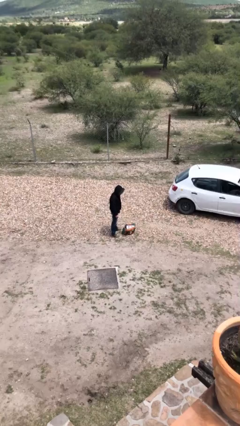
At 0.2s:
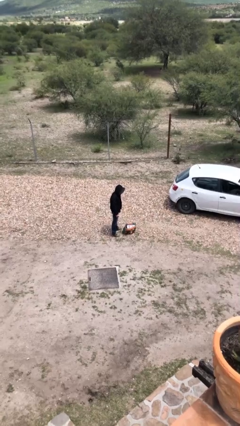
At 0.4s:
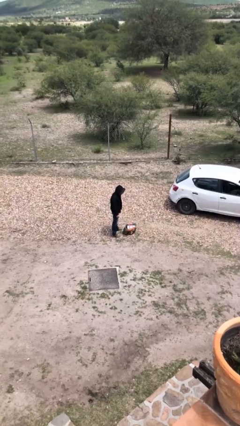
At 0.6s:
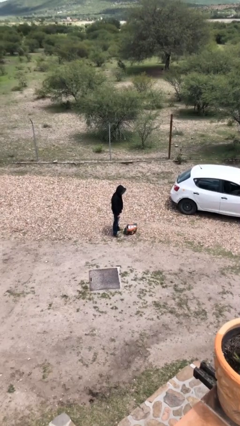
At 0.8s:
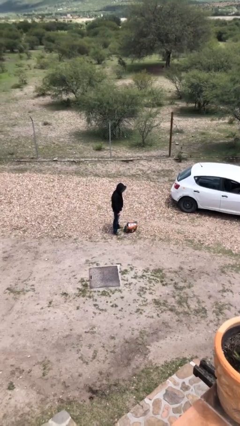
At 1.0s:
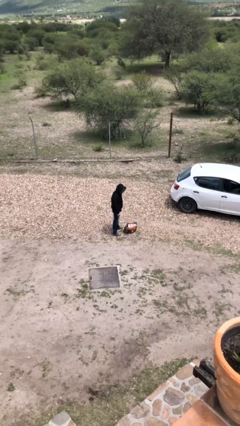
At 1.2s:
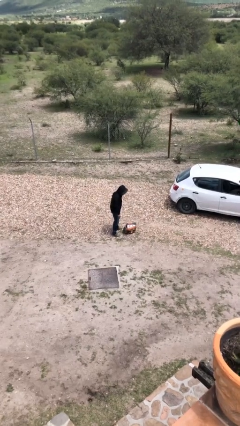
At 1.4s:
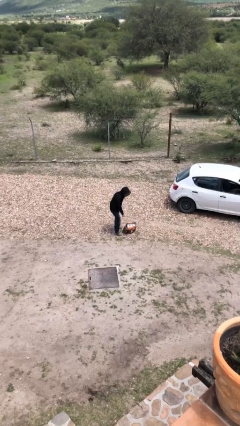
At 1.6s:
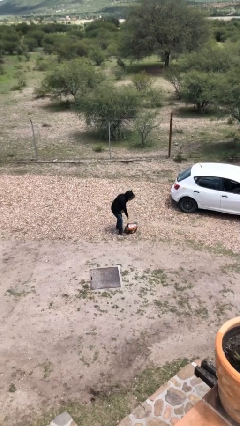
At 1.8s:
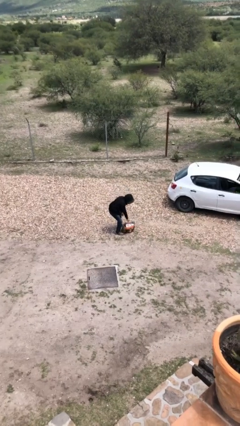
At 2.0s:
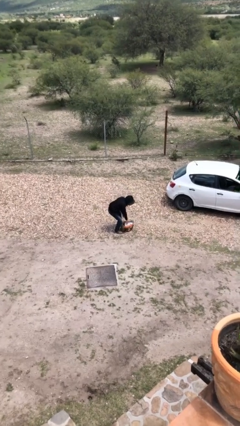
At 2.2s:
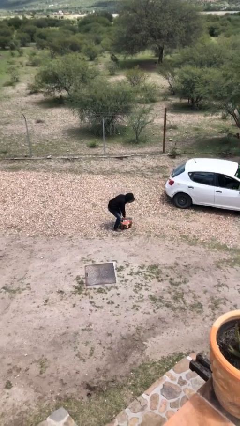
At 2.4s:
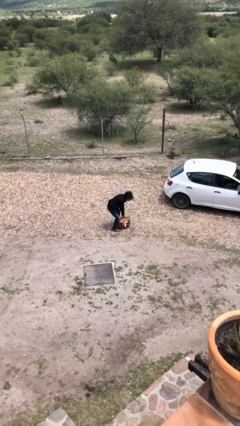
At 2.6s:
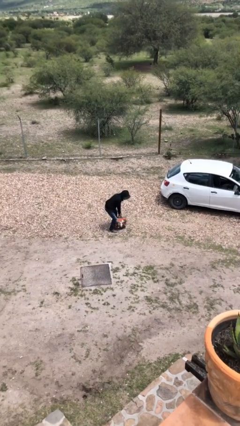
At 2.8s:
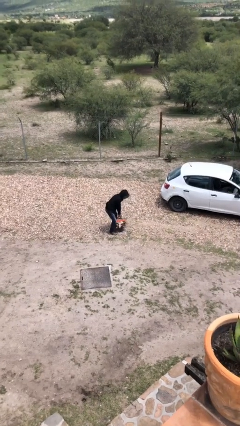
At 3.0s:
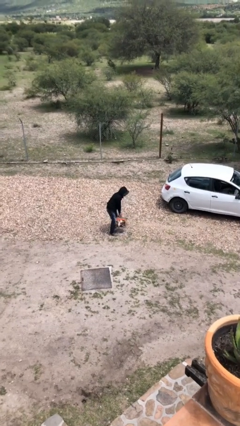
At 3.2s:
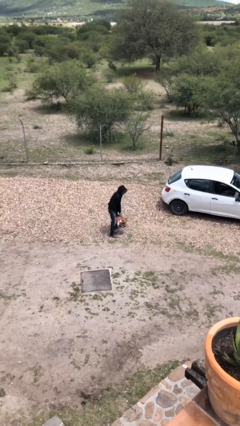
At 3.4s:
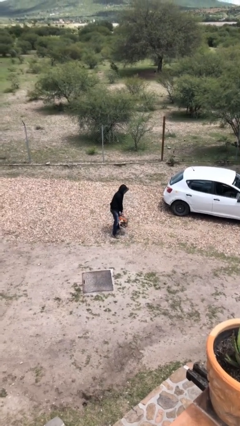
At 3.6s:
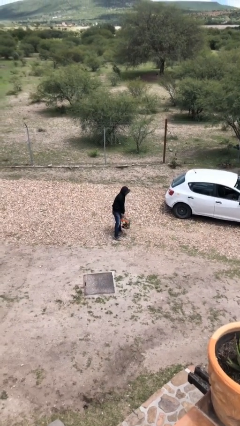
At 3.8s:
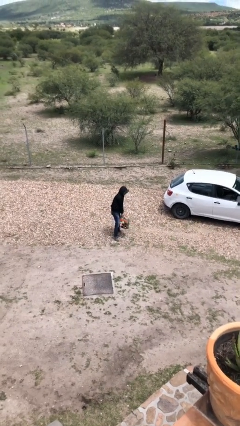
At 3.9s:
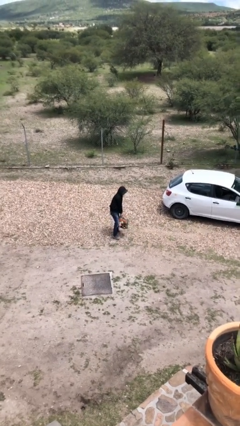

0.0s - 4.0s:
person picks up object from floor

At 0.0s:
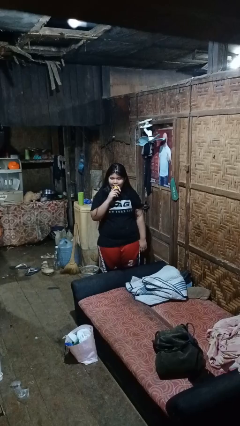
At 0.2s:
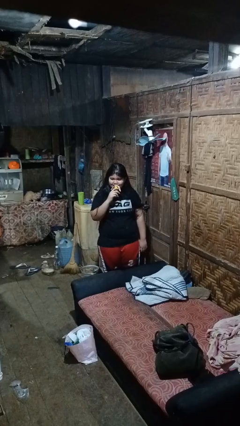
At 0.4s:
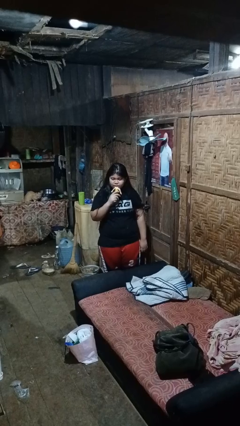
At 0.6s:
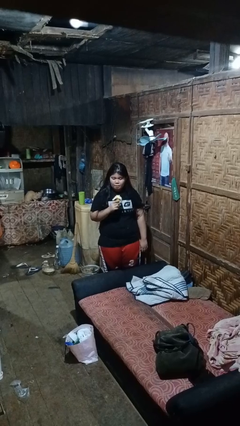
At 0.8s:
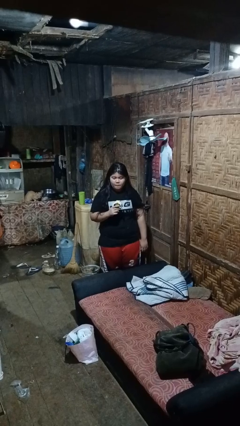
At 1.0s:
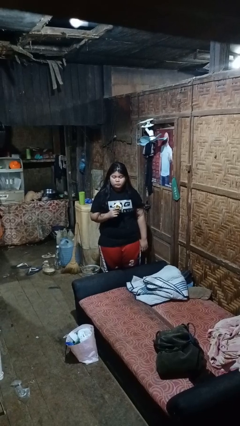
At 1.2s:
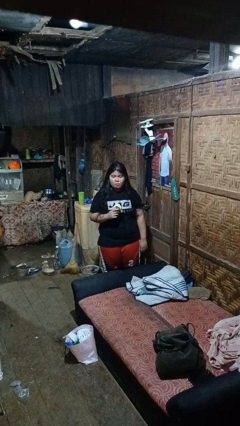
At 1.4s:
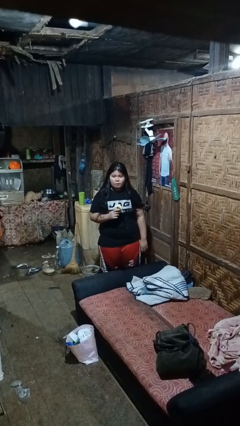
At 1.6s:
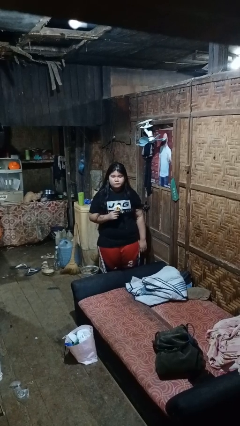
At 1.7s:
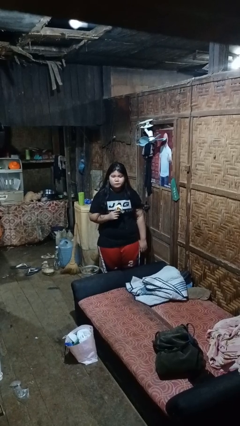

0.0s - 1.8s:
person eats banana

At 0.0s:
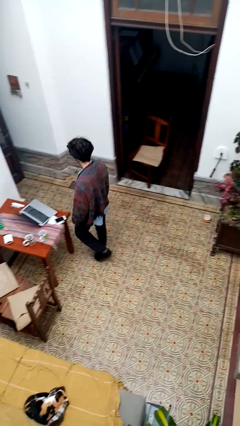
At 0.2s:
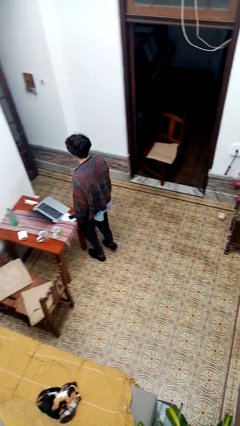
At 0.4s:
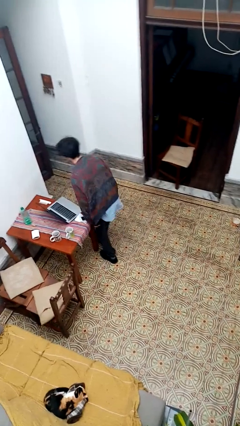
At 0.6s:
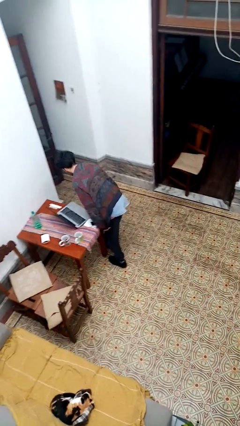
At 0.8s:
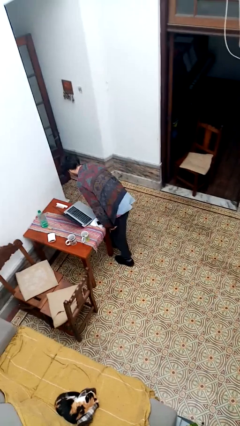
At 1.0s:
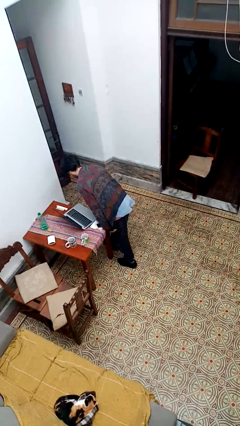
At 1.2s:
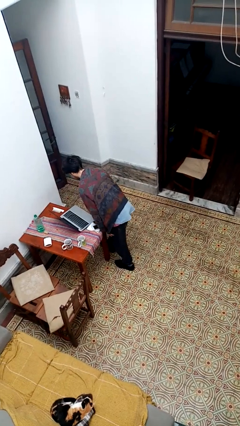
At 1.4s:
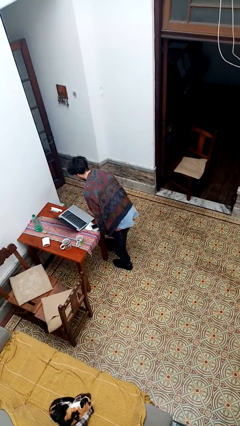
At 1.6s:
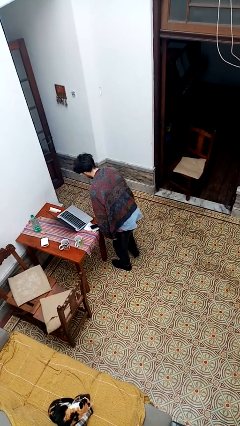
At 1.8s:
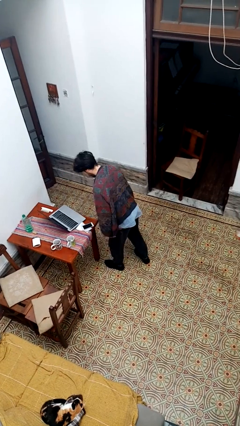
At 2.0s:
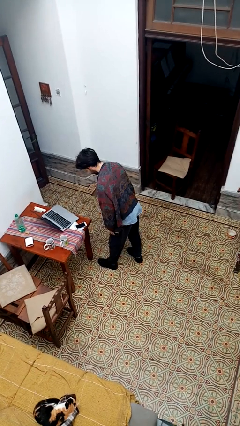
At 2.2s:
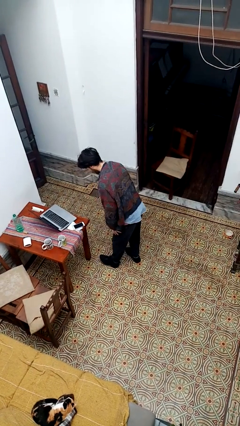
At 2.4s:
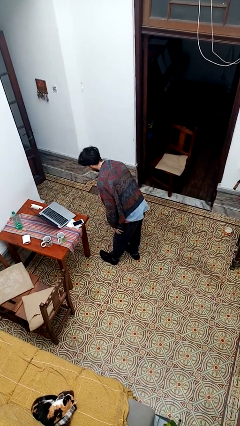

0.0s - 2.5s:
person bumps into table

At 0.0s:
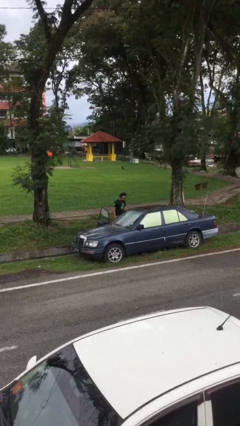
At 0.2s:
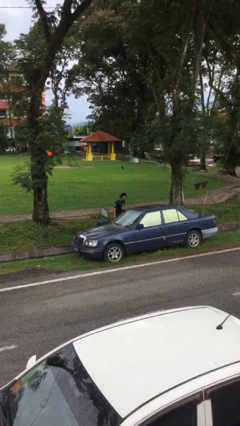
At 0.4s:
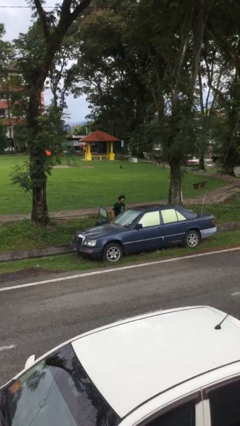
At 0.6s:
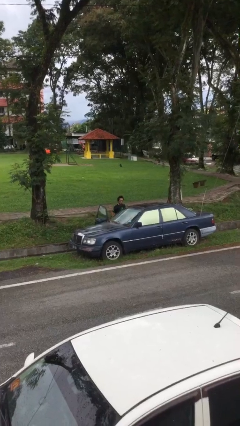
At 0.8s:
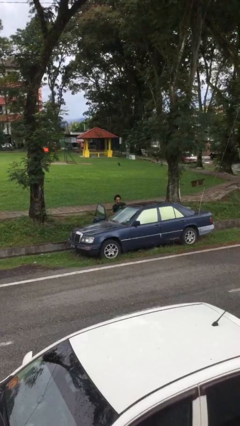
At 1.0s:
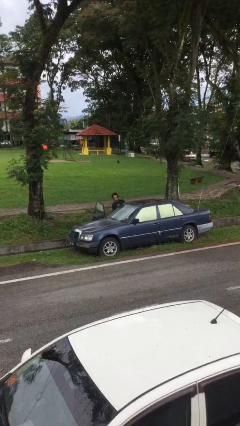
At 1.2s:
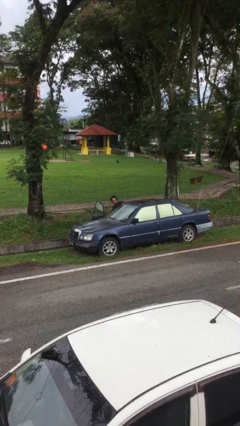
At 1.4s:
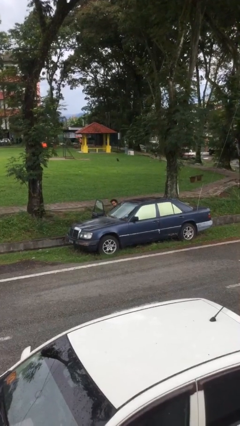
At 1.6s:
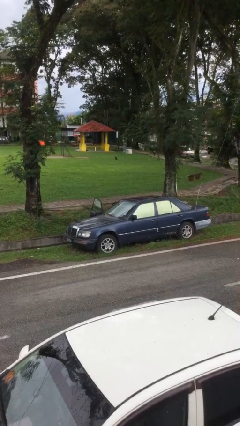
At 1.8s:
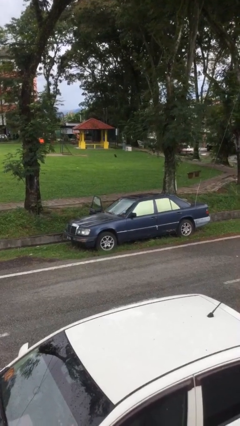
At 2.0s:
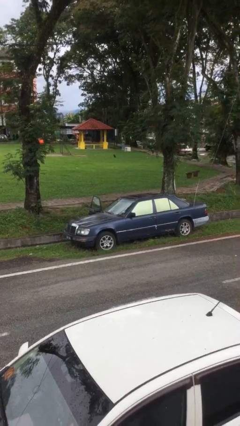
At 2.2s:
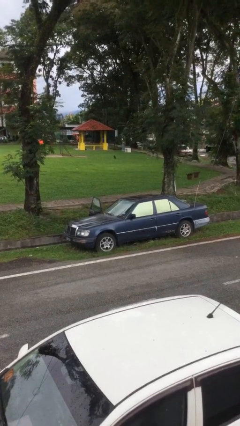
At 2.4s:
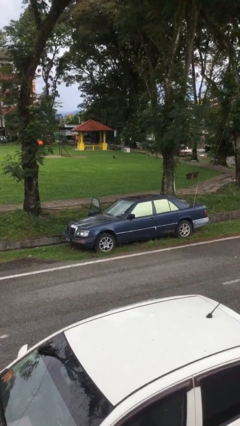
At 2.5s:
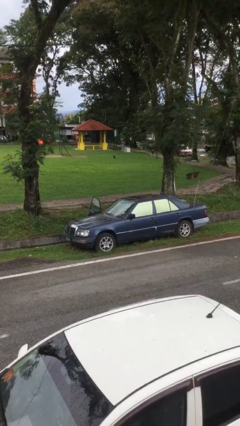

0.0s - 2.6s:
person enters car

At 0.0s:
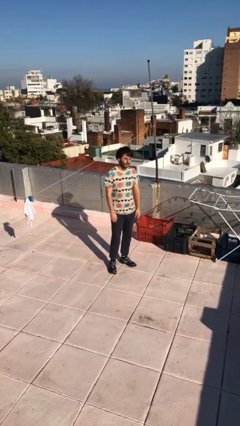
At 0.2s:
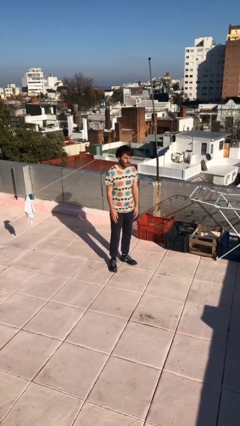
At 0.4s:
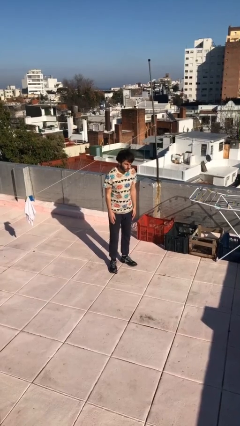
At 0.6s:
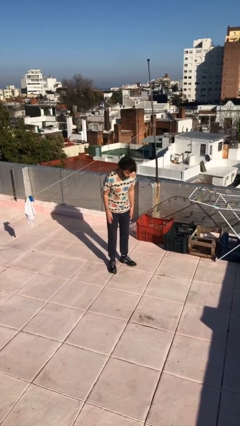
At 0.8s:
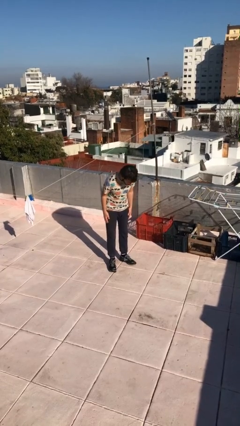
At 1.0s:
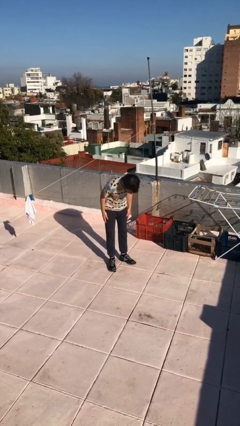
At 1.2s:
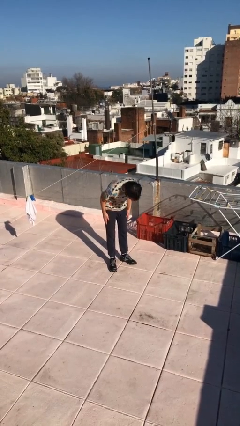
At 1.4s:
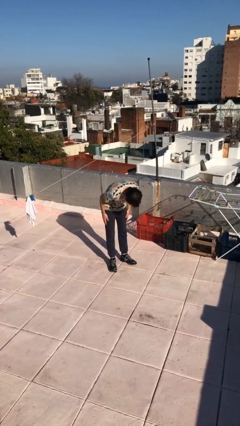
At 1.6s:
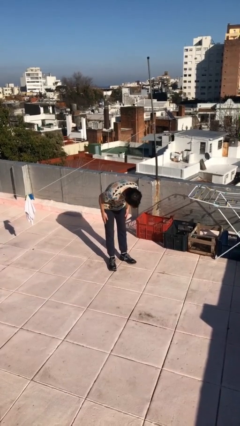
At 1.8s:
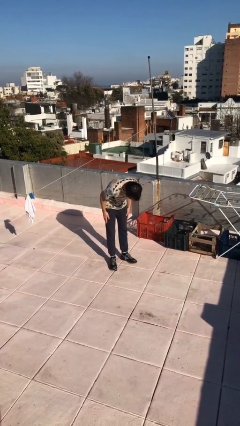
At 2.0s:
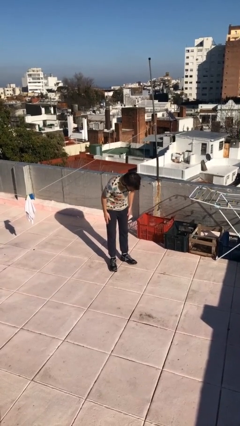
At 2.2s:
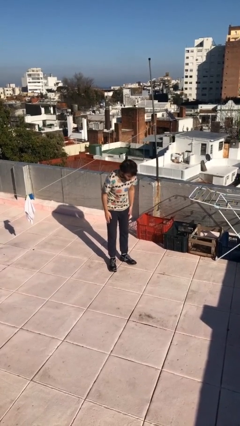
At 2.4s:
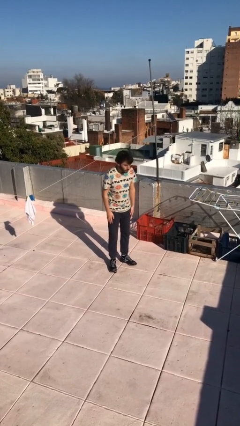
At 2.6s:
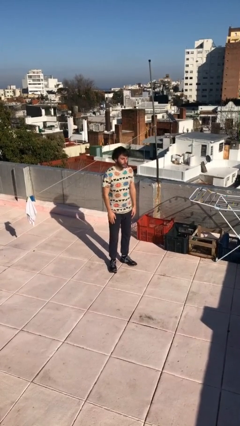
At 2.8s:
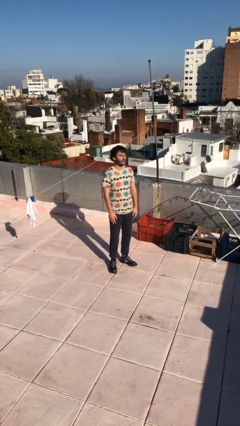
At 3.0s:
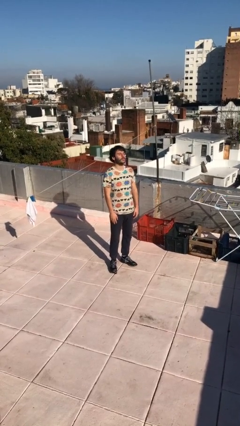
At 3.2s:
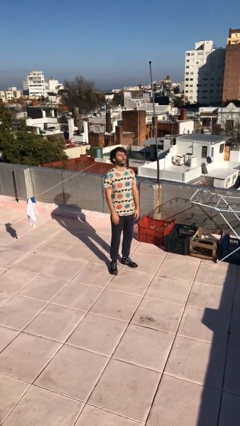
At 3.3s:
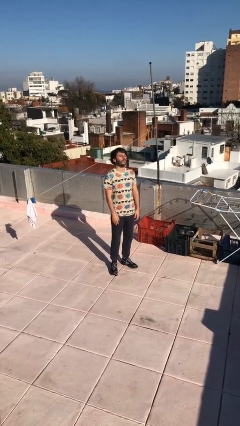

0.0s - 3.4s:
person bows

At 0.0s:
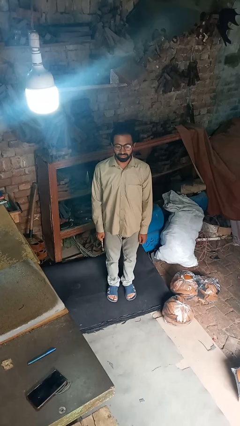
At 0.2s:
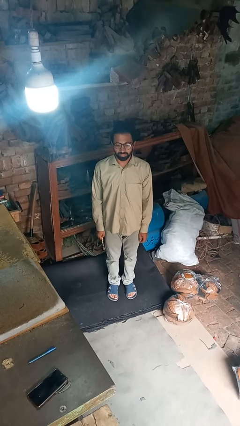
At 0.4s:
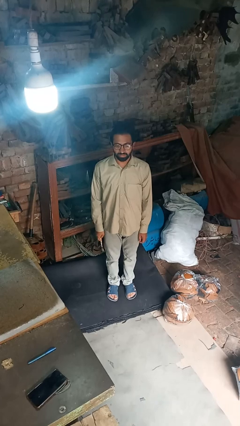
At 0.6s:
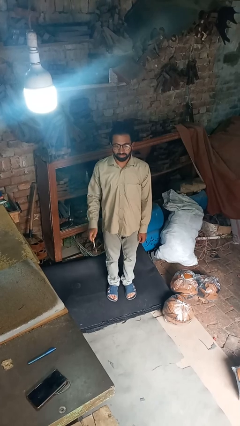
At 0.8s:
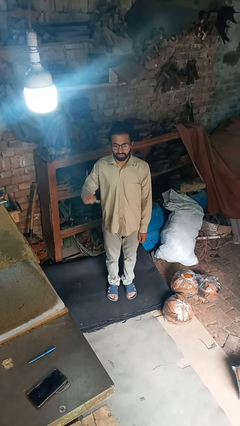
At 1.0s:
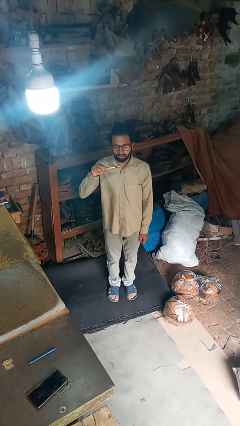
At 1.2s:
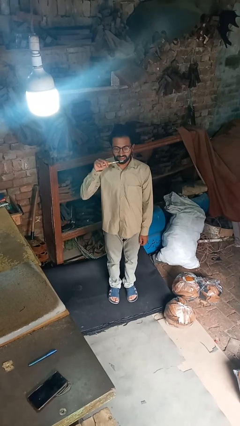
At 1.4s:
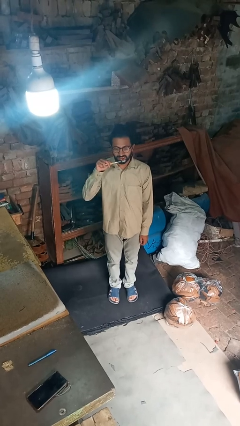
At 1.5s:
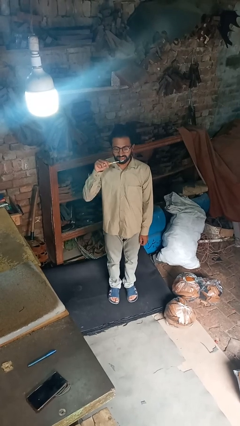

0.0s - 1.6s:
person brushes teeth

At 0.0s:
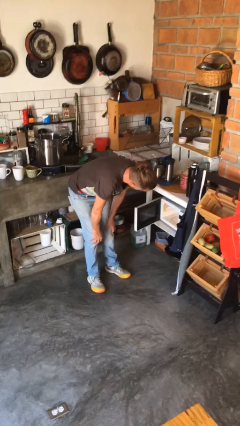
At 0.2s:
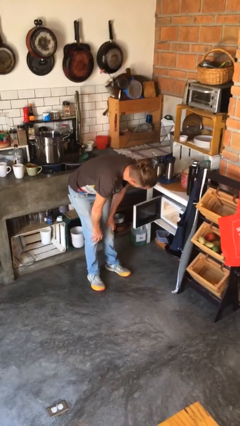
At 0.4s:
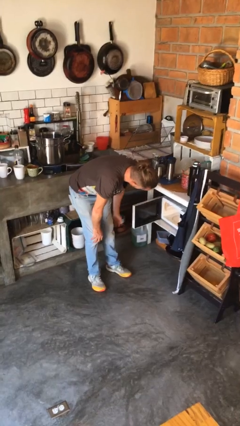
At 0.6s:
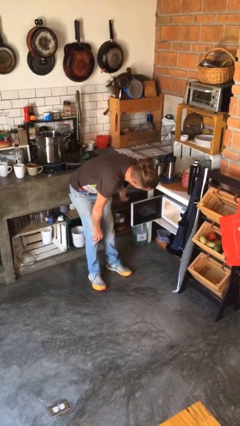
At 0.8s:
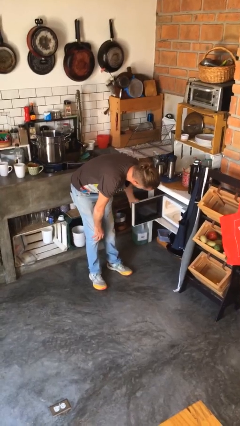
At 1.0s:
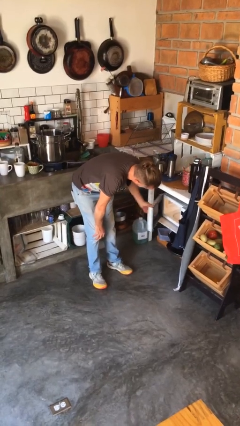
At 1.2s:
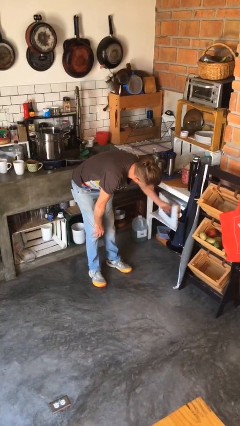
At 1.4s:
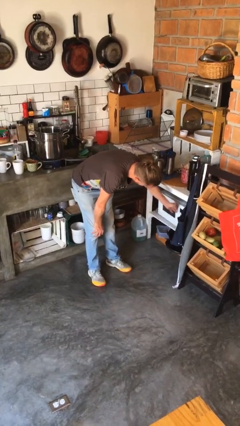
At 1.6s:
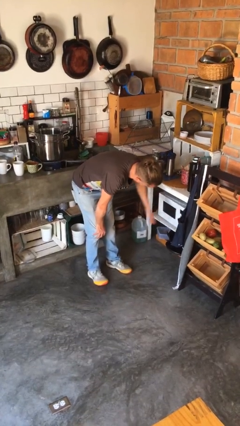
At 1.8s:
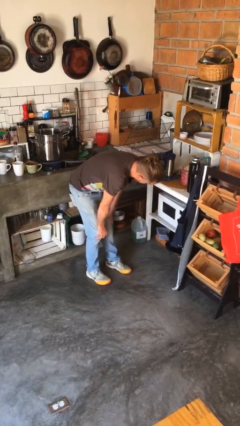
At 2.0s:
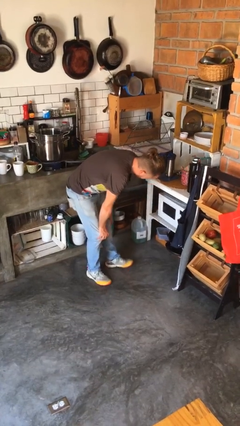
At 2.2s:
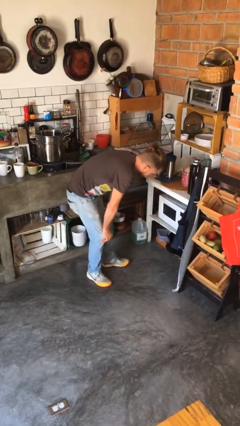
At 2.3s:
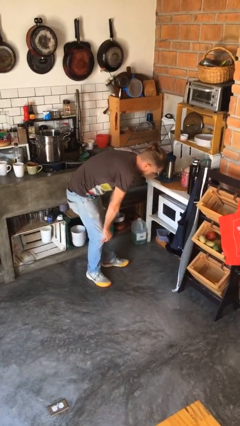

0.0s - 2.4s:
person closes microwave
